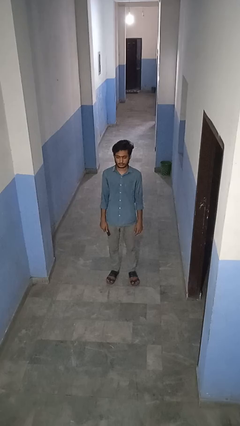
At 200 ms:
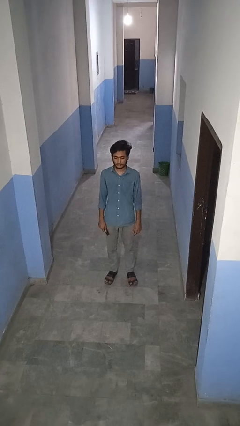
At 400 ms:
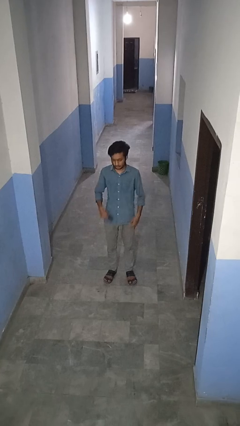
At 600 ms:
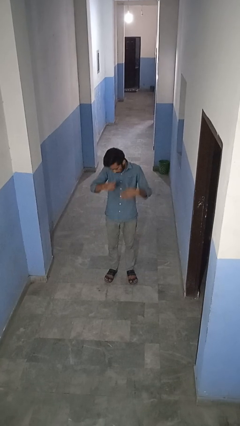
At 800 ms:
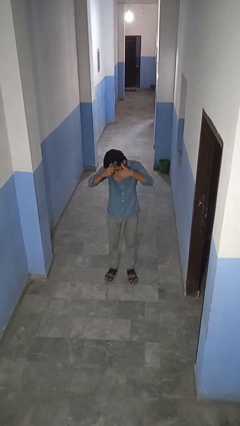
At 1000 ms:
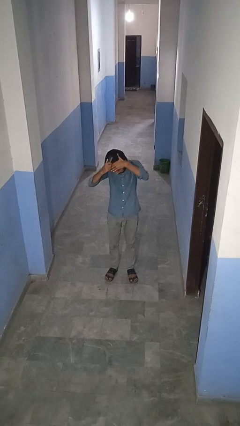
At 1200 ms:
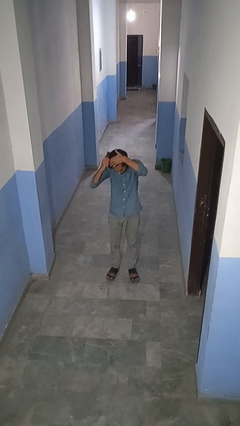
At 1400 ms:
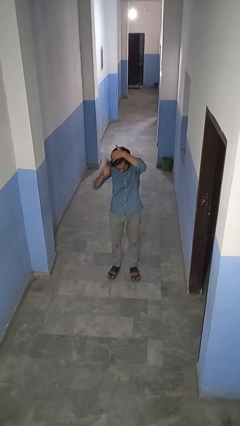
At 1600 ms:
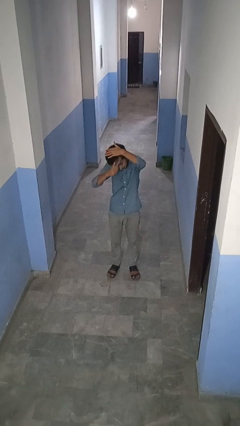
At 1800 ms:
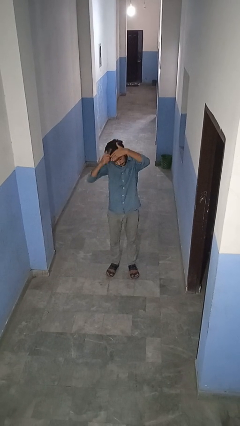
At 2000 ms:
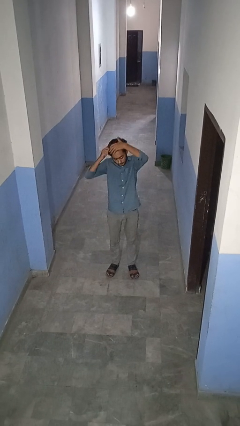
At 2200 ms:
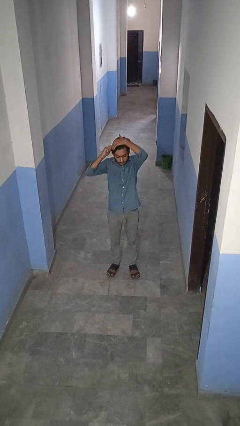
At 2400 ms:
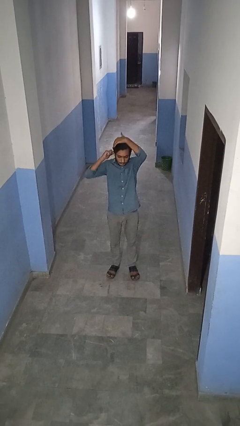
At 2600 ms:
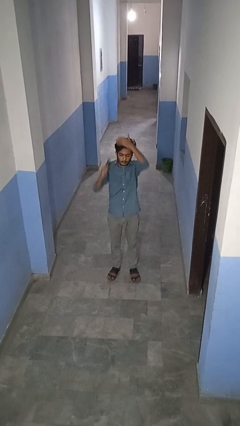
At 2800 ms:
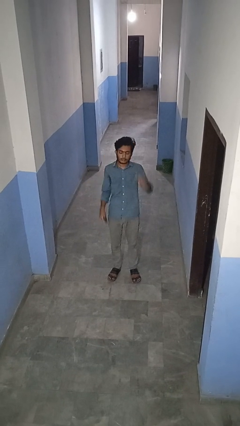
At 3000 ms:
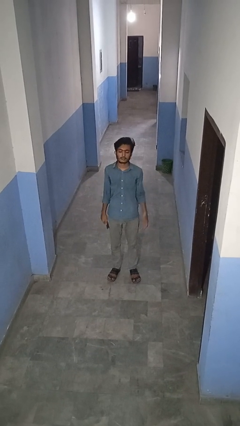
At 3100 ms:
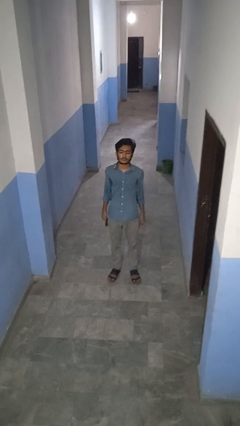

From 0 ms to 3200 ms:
person brushes hair

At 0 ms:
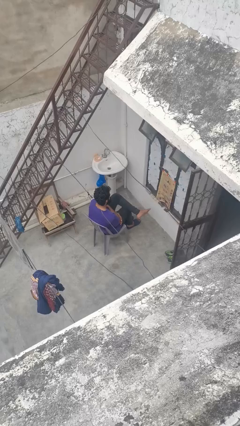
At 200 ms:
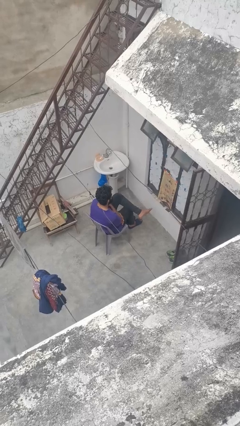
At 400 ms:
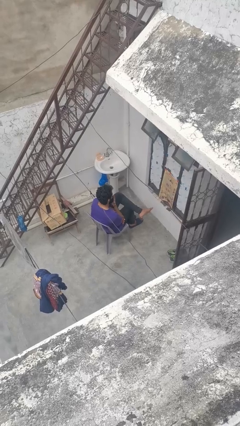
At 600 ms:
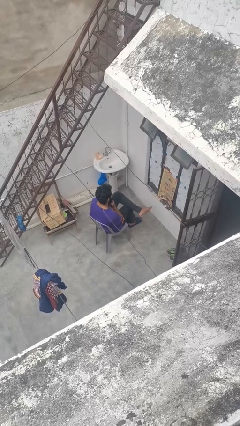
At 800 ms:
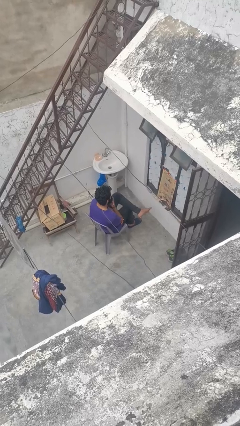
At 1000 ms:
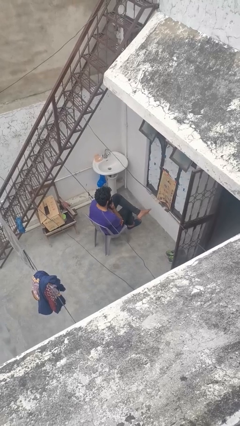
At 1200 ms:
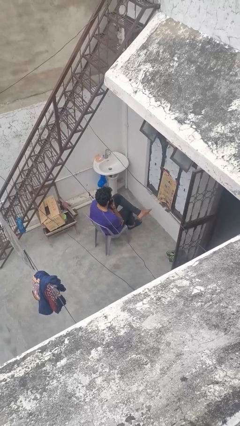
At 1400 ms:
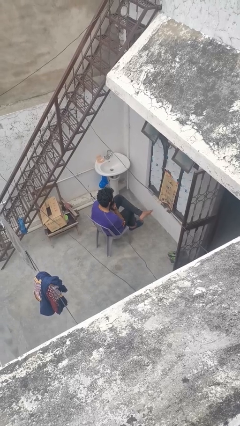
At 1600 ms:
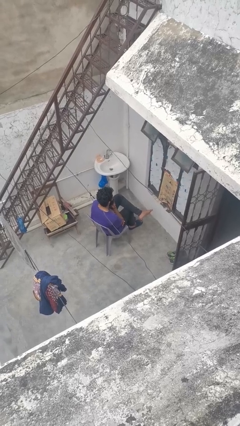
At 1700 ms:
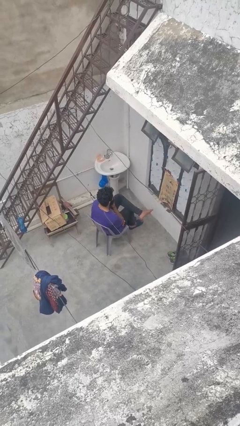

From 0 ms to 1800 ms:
person strokes chin

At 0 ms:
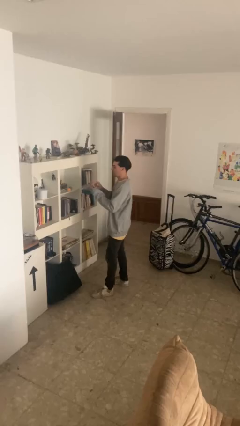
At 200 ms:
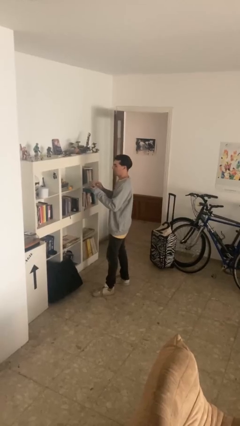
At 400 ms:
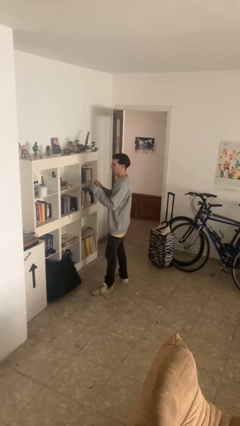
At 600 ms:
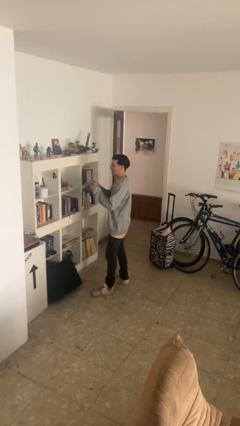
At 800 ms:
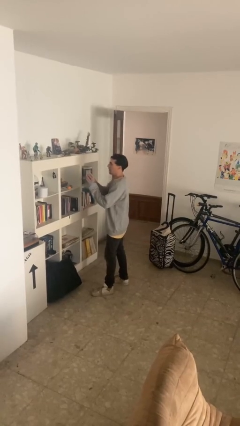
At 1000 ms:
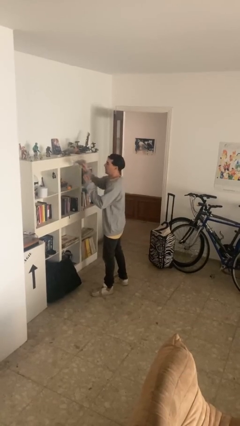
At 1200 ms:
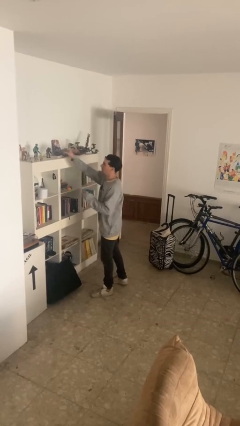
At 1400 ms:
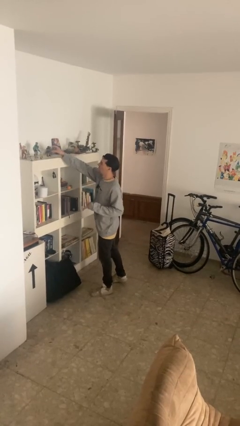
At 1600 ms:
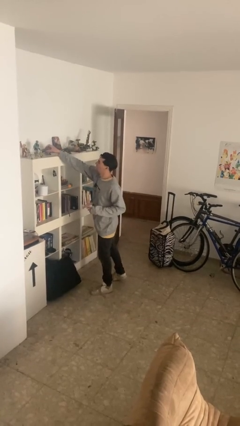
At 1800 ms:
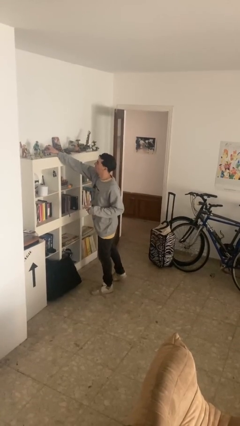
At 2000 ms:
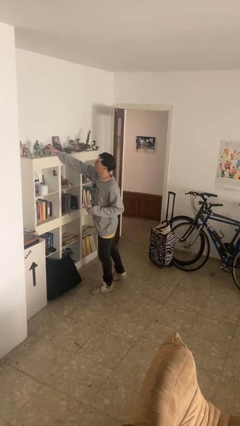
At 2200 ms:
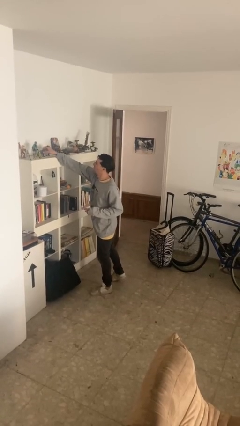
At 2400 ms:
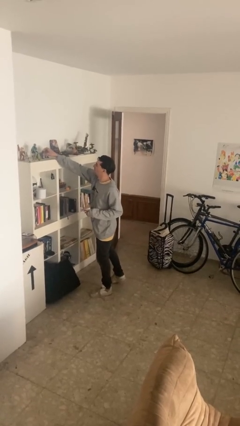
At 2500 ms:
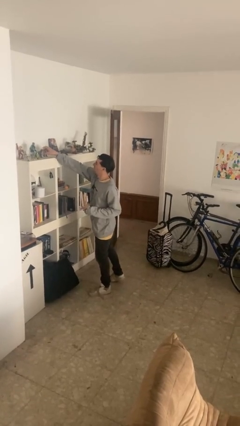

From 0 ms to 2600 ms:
person puts down object on shelf

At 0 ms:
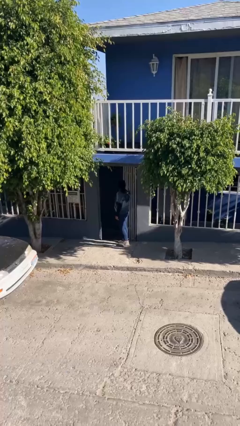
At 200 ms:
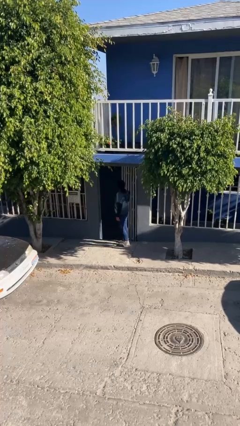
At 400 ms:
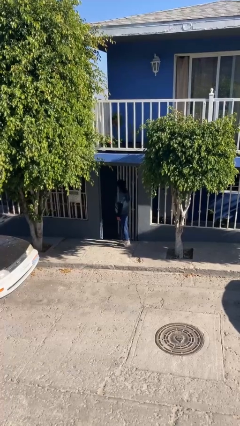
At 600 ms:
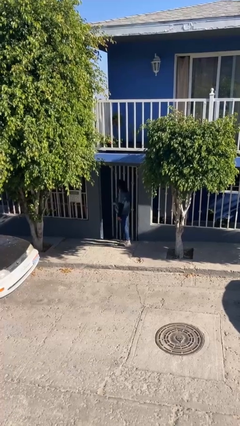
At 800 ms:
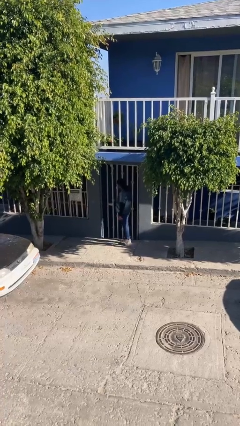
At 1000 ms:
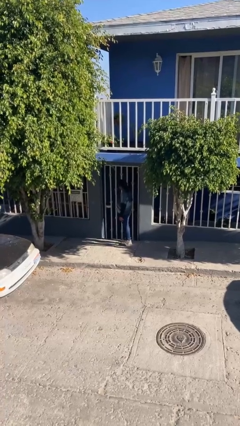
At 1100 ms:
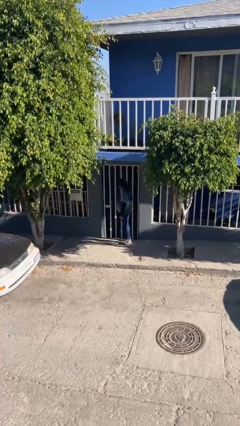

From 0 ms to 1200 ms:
person closes facility door

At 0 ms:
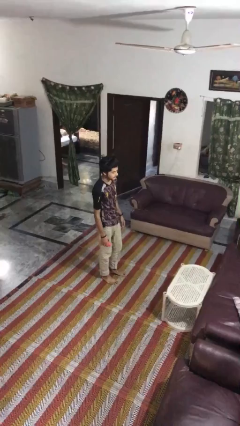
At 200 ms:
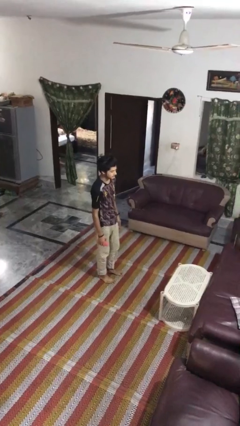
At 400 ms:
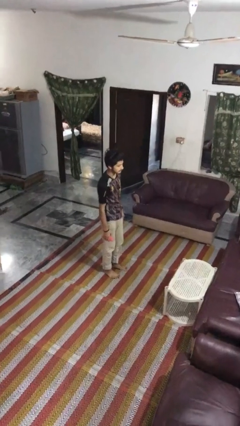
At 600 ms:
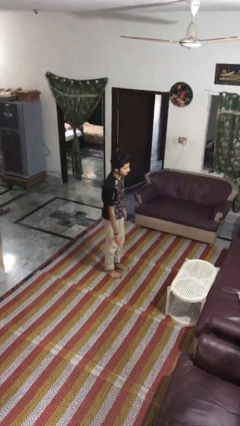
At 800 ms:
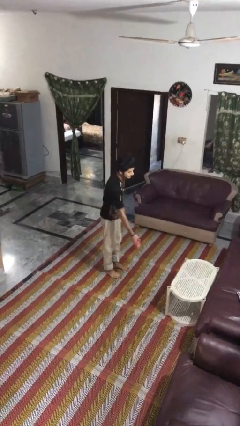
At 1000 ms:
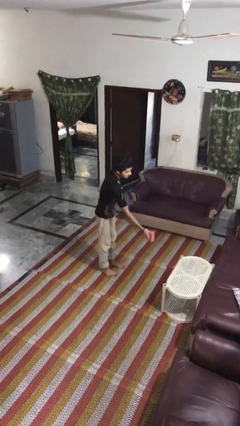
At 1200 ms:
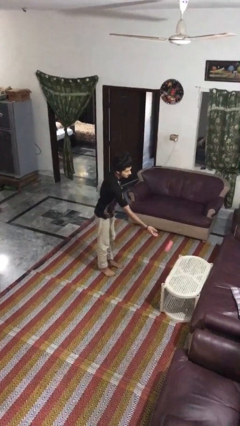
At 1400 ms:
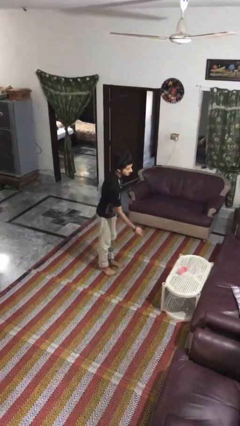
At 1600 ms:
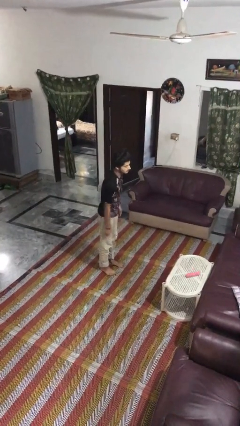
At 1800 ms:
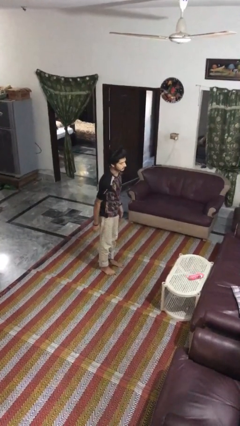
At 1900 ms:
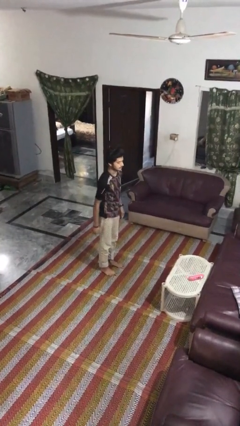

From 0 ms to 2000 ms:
person throws object on table

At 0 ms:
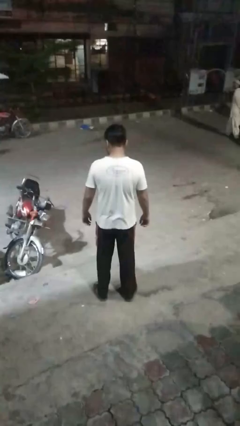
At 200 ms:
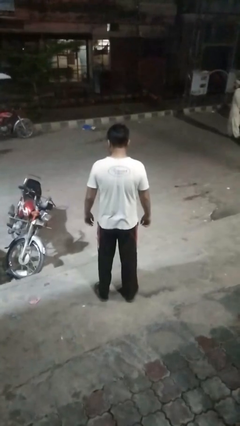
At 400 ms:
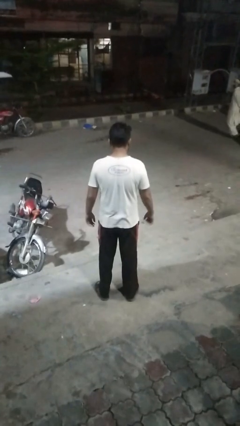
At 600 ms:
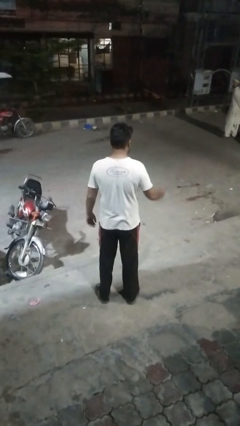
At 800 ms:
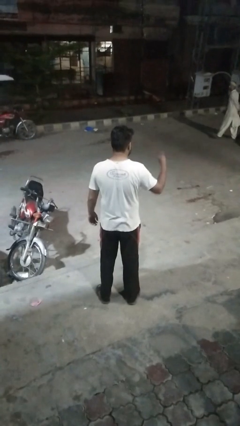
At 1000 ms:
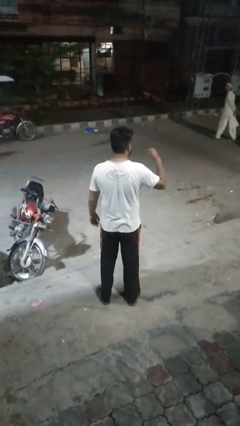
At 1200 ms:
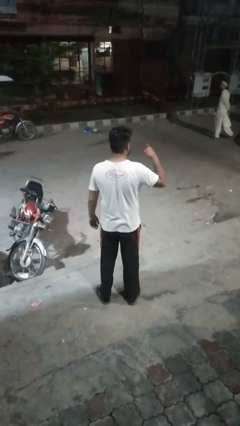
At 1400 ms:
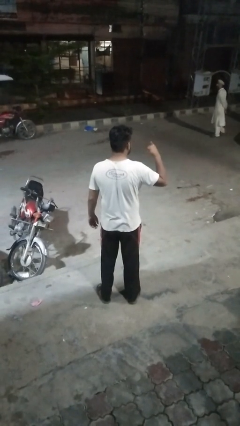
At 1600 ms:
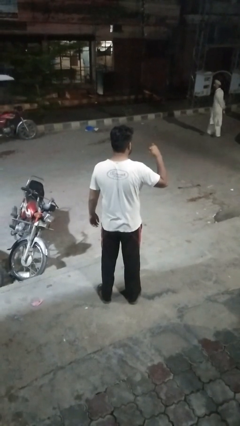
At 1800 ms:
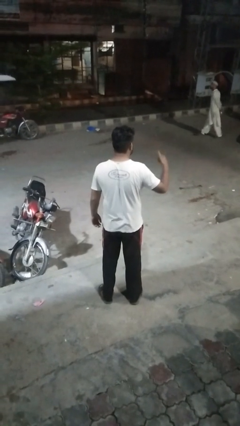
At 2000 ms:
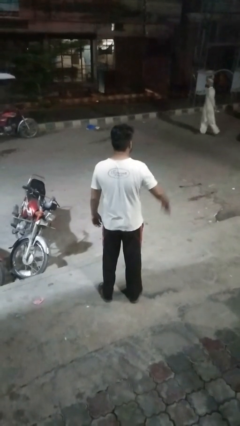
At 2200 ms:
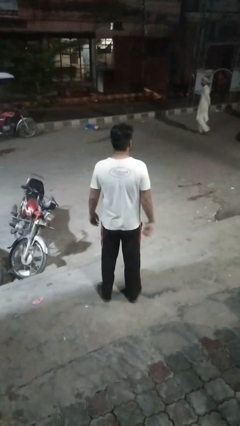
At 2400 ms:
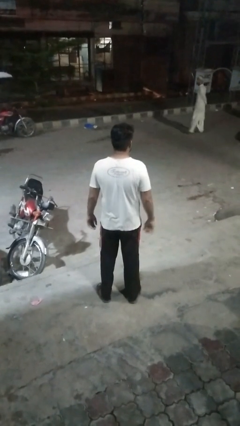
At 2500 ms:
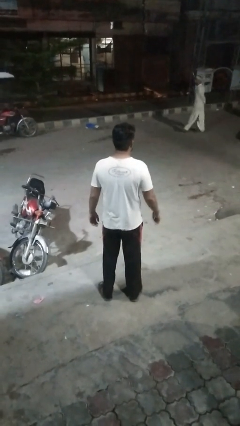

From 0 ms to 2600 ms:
person gestures hang loose

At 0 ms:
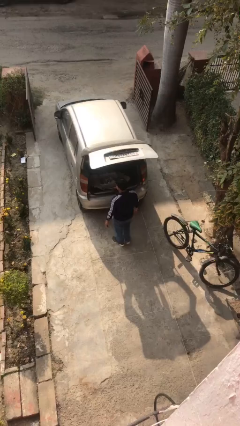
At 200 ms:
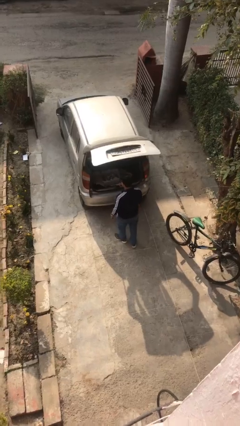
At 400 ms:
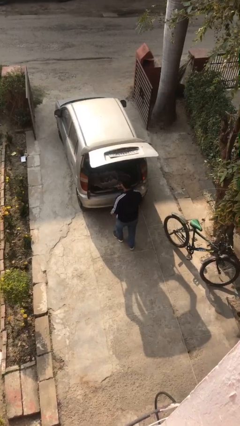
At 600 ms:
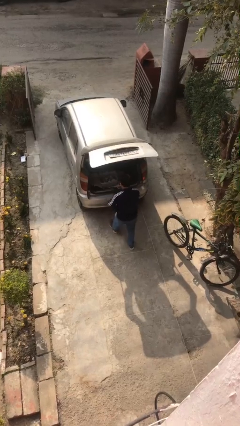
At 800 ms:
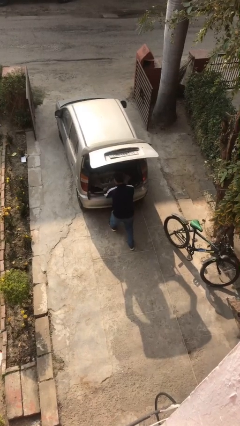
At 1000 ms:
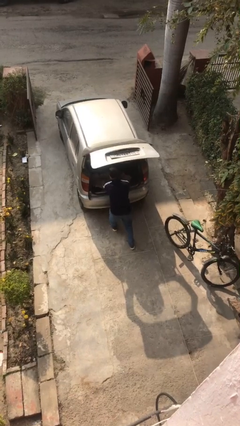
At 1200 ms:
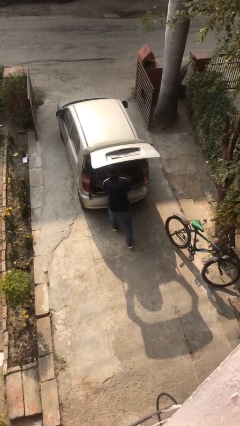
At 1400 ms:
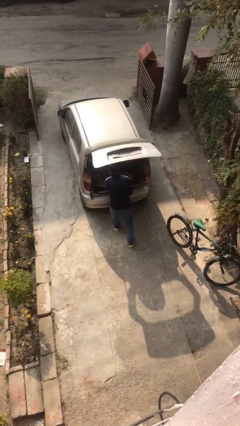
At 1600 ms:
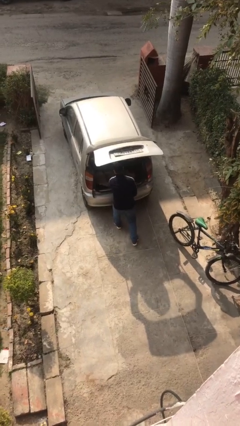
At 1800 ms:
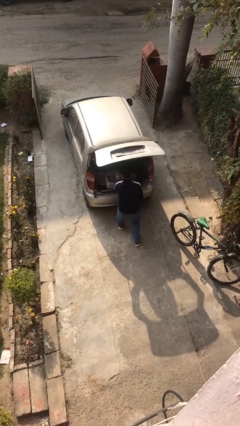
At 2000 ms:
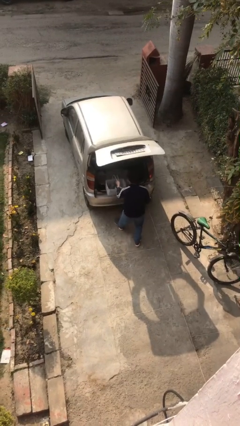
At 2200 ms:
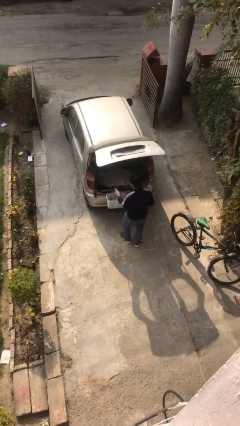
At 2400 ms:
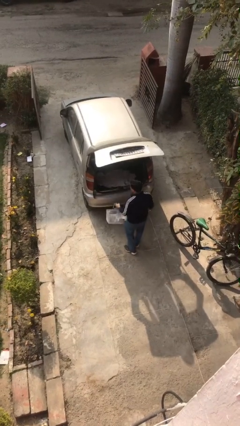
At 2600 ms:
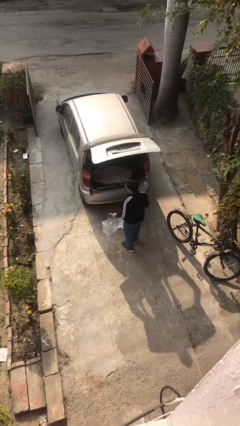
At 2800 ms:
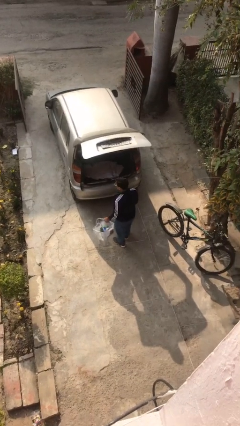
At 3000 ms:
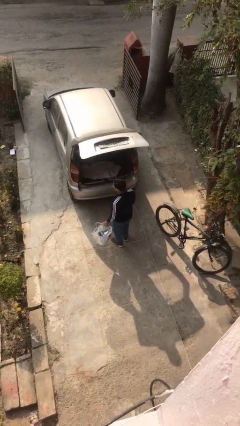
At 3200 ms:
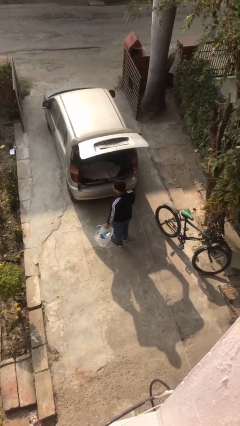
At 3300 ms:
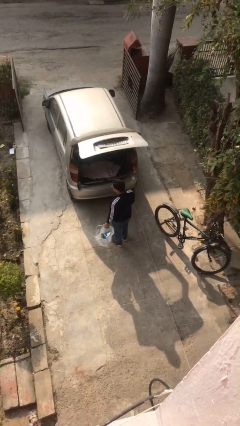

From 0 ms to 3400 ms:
person unloads car

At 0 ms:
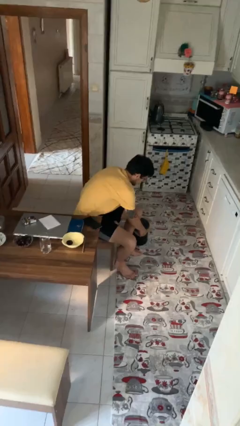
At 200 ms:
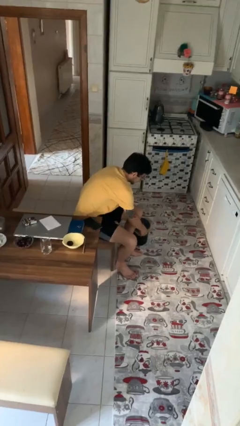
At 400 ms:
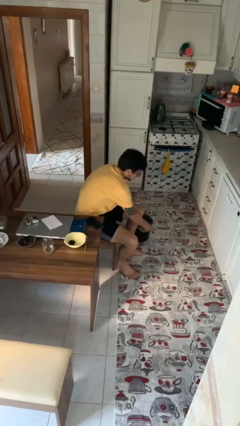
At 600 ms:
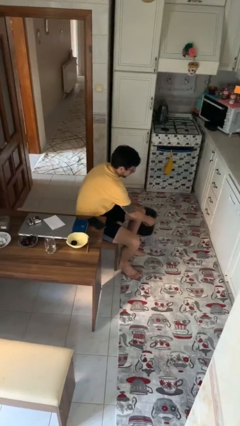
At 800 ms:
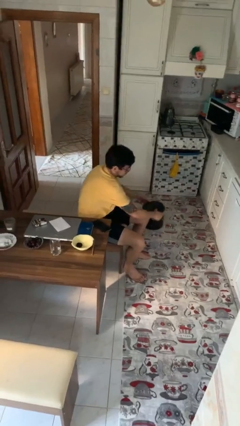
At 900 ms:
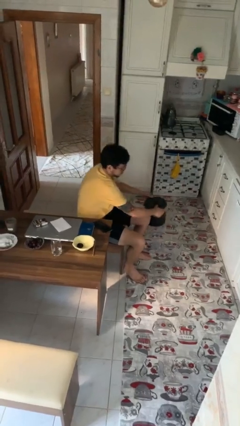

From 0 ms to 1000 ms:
person picks up object from floor
